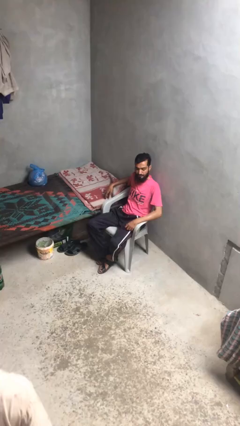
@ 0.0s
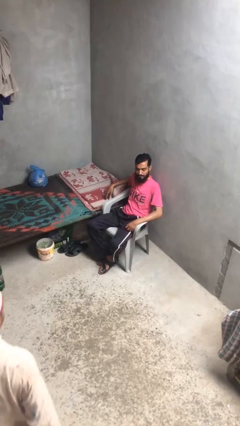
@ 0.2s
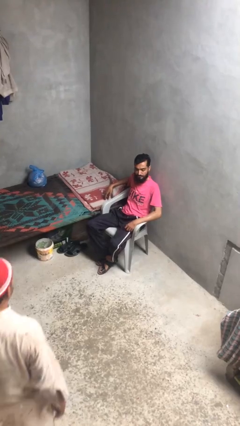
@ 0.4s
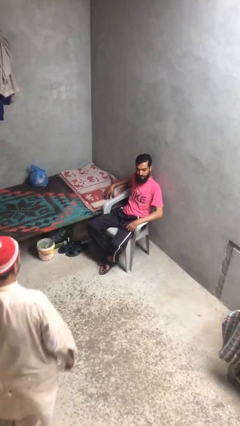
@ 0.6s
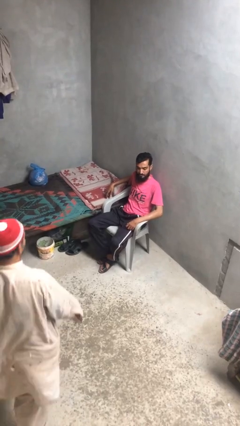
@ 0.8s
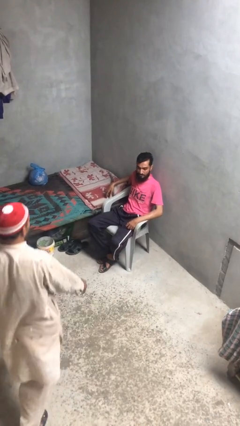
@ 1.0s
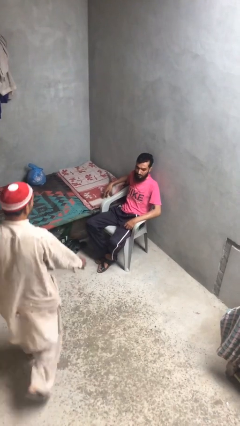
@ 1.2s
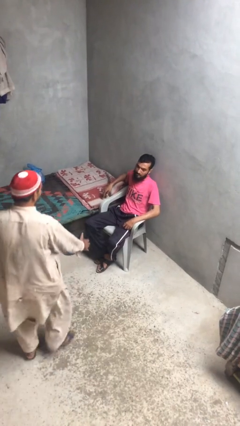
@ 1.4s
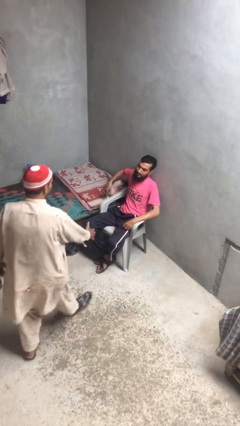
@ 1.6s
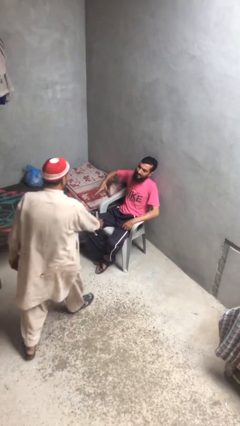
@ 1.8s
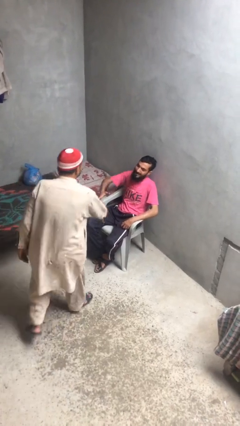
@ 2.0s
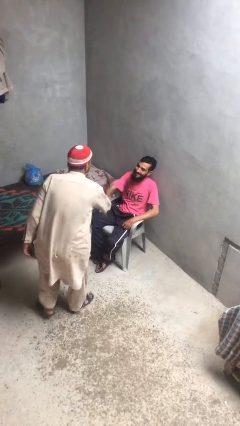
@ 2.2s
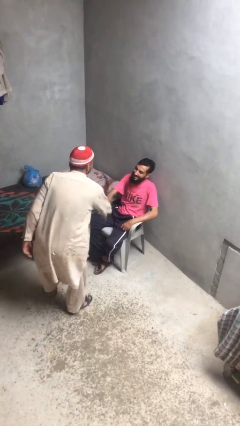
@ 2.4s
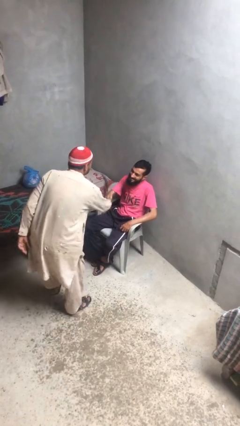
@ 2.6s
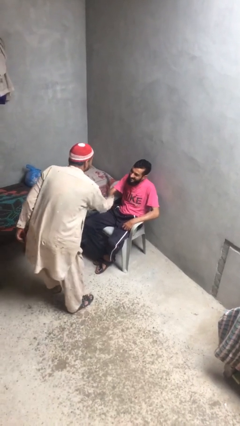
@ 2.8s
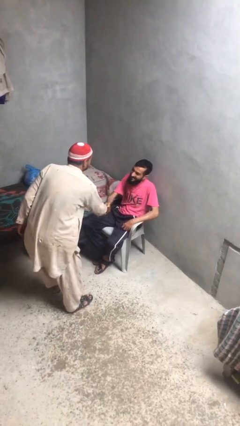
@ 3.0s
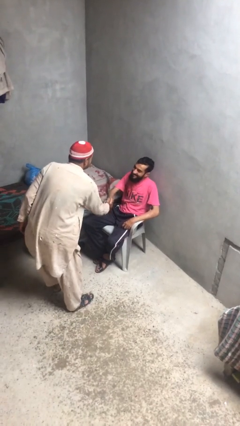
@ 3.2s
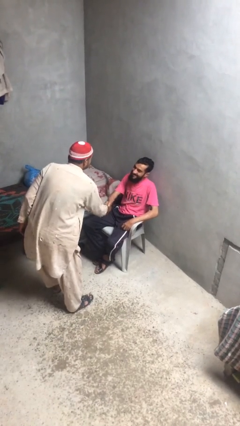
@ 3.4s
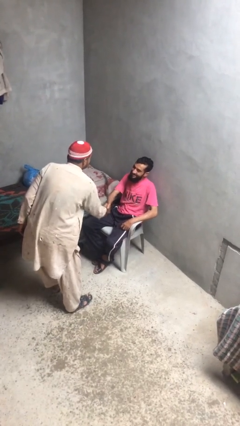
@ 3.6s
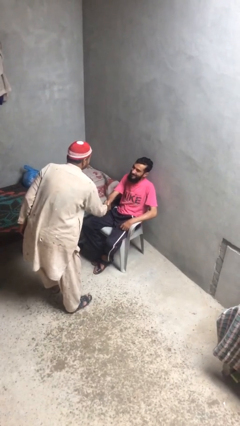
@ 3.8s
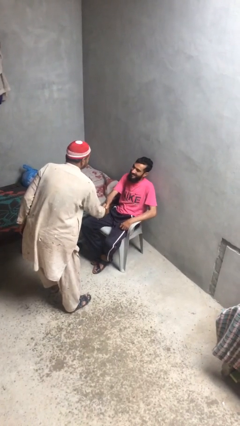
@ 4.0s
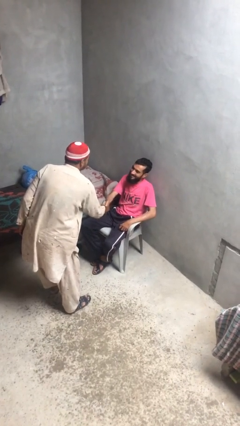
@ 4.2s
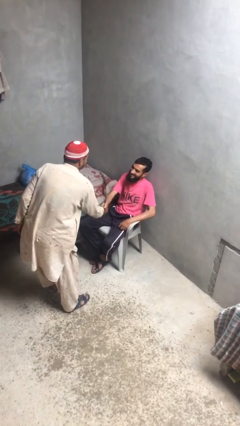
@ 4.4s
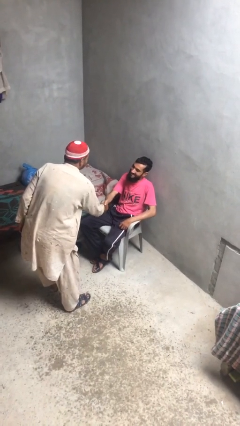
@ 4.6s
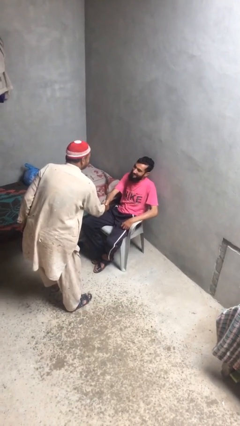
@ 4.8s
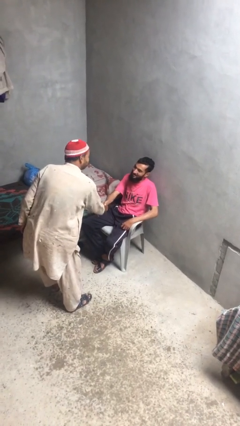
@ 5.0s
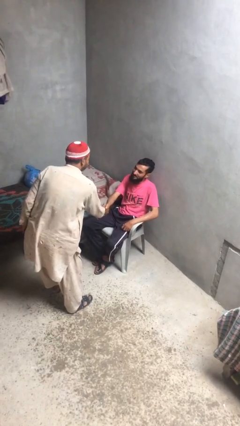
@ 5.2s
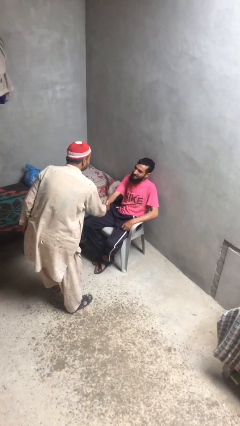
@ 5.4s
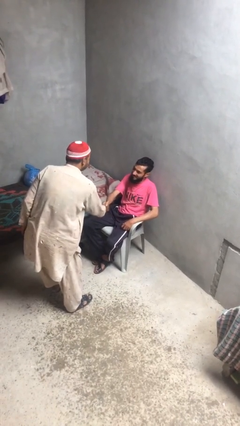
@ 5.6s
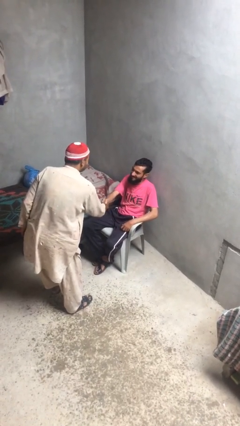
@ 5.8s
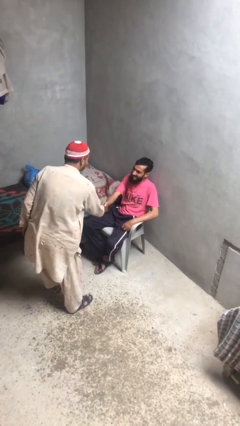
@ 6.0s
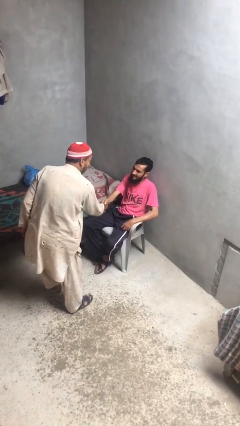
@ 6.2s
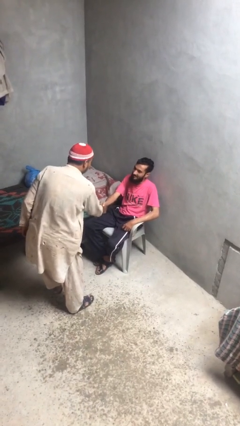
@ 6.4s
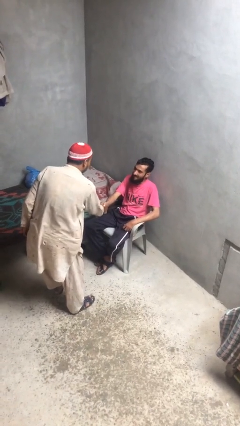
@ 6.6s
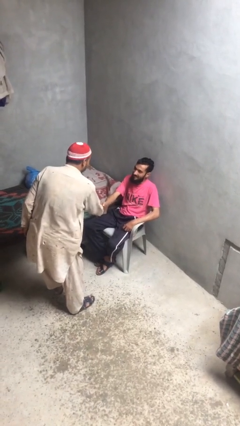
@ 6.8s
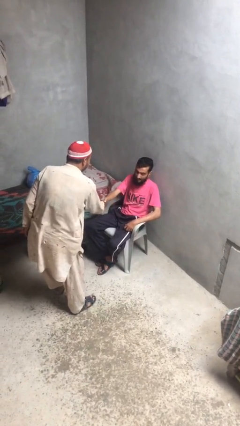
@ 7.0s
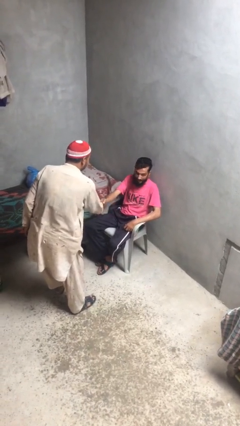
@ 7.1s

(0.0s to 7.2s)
person shakes hand

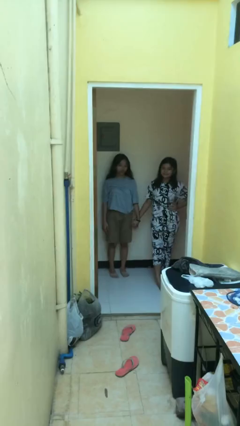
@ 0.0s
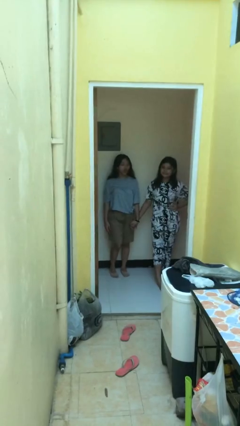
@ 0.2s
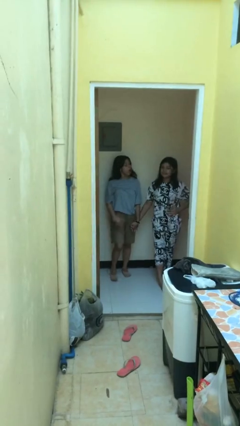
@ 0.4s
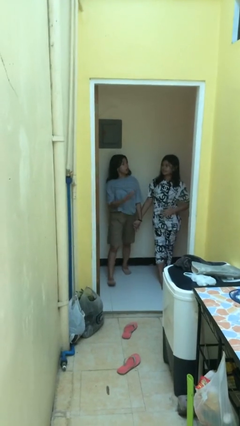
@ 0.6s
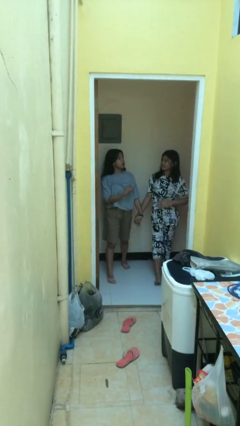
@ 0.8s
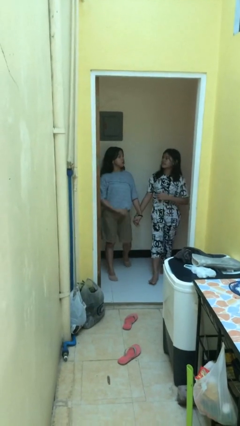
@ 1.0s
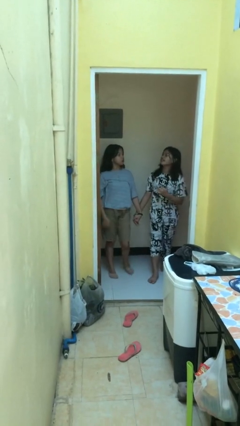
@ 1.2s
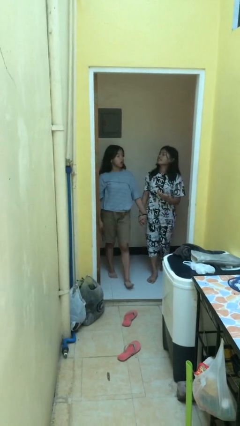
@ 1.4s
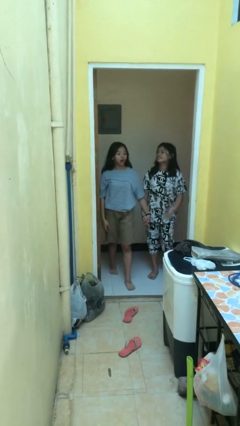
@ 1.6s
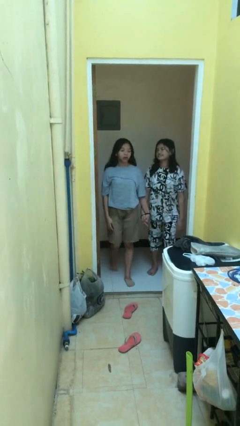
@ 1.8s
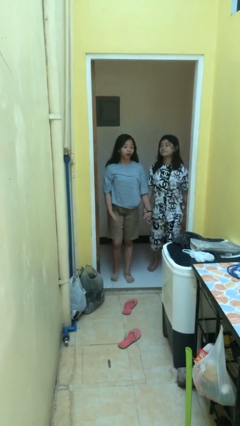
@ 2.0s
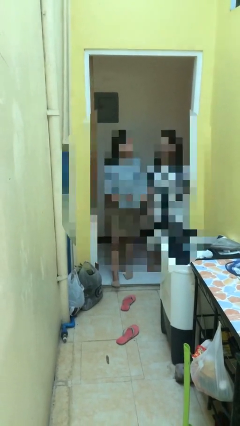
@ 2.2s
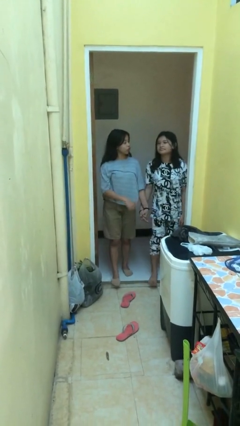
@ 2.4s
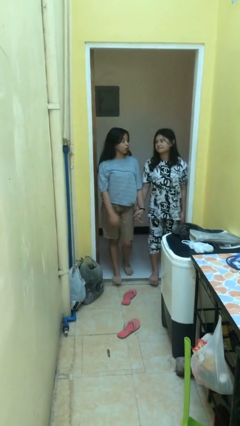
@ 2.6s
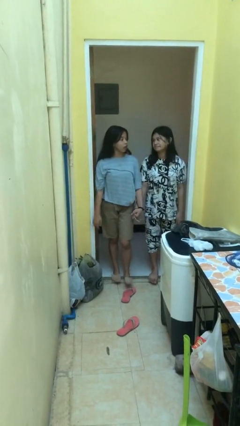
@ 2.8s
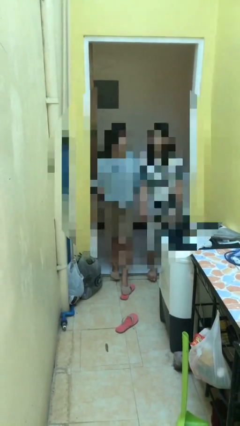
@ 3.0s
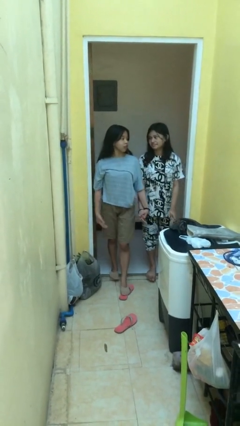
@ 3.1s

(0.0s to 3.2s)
person holds hand

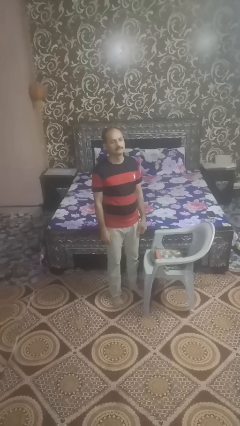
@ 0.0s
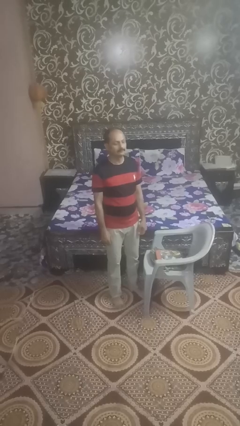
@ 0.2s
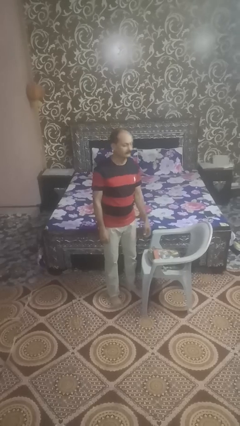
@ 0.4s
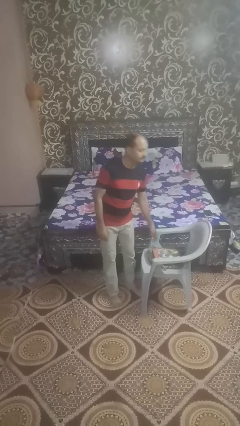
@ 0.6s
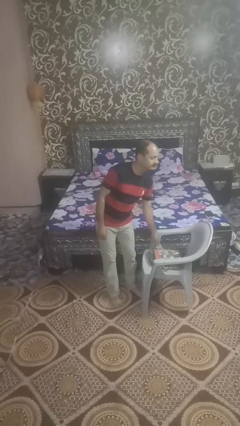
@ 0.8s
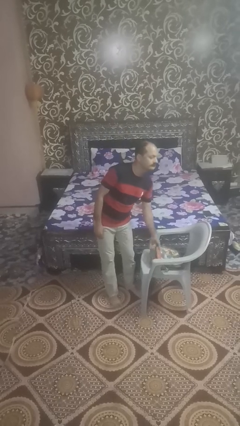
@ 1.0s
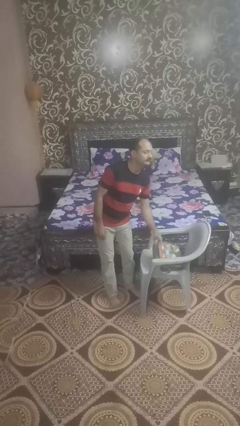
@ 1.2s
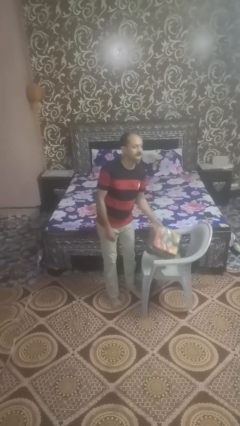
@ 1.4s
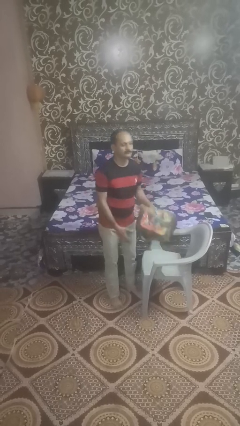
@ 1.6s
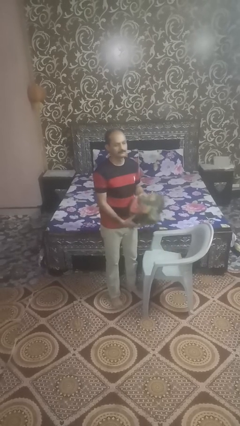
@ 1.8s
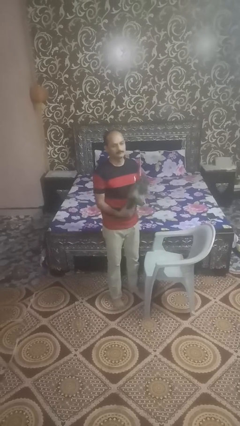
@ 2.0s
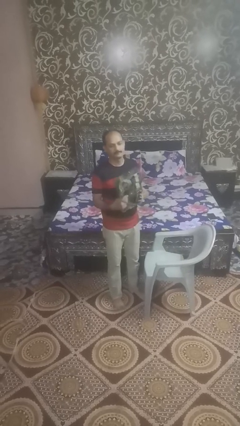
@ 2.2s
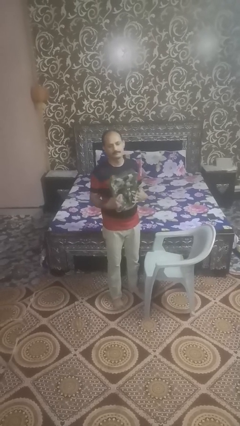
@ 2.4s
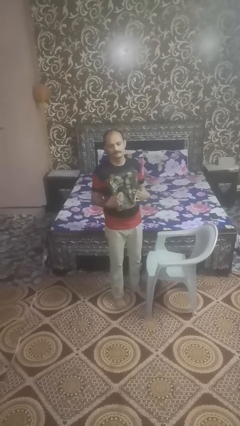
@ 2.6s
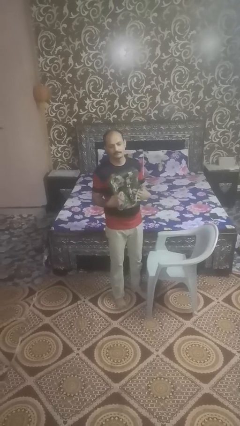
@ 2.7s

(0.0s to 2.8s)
person picks up object from couch

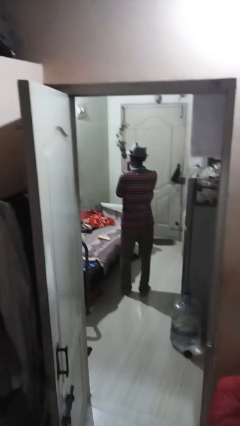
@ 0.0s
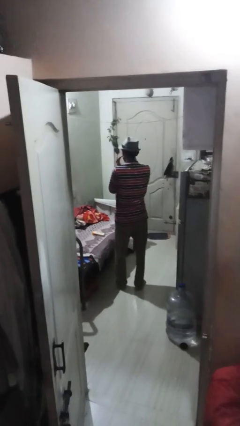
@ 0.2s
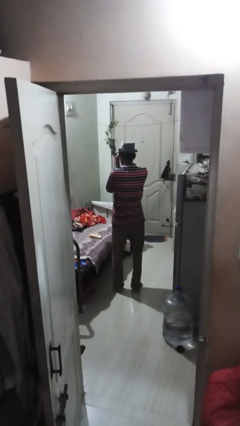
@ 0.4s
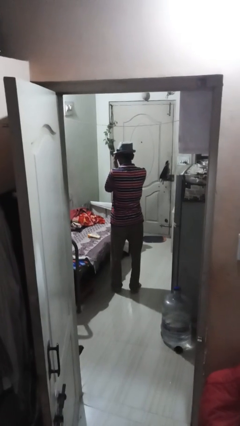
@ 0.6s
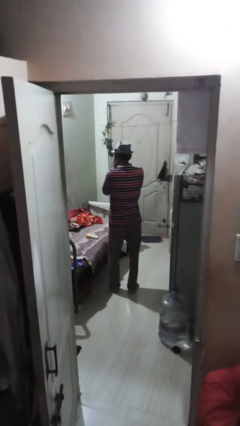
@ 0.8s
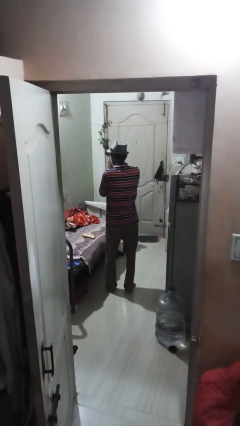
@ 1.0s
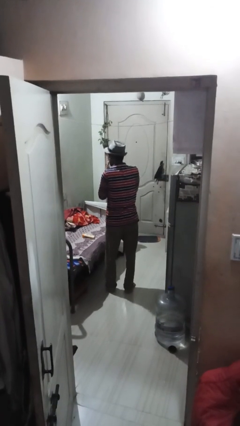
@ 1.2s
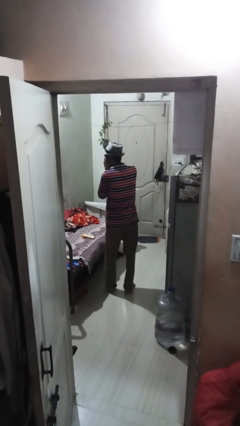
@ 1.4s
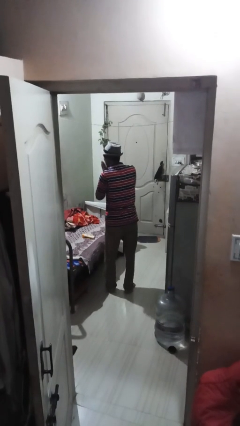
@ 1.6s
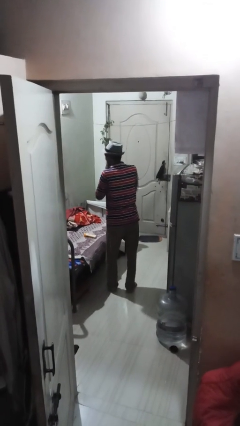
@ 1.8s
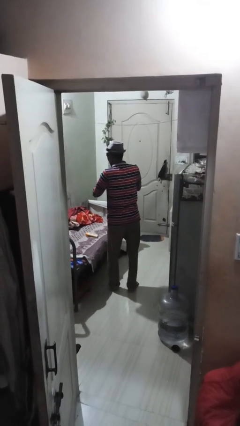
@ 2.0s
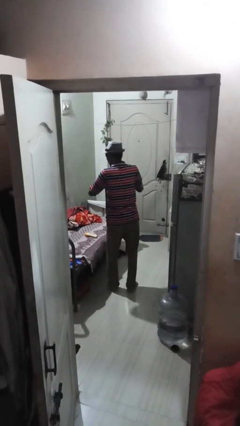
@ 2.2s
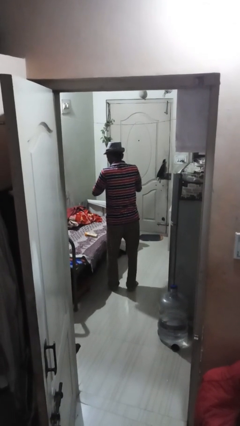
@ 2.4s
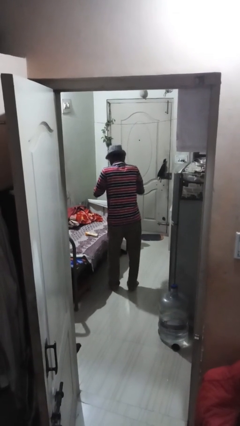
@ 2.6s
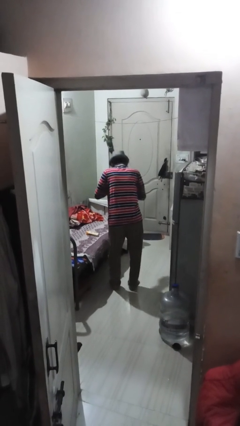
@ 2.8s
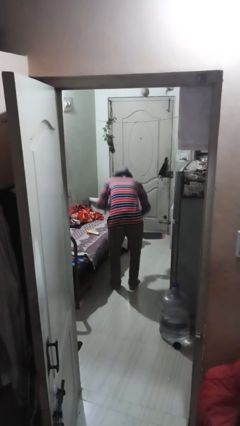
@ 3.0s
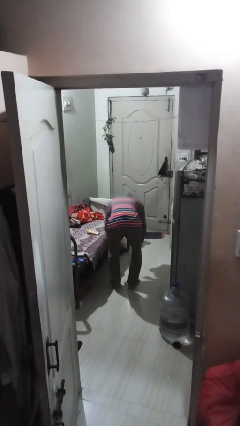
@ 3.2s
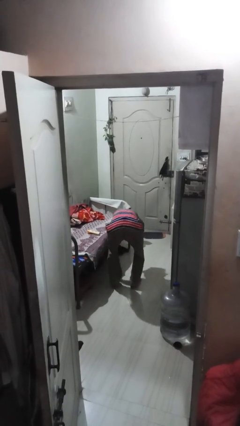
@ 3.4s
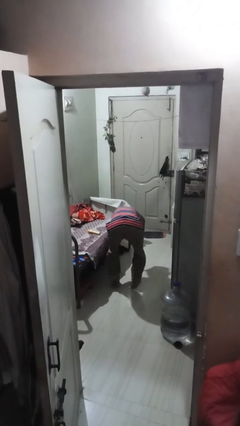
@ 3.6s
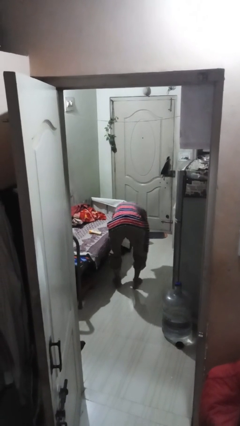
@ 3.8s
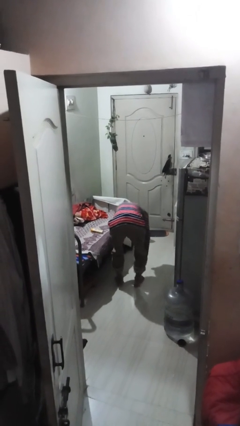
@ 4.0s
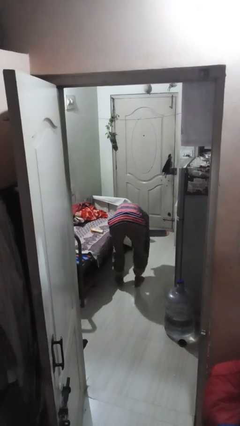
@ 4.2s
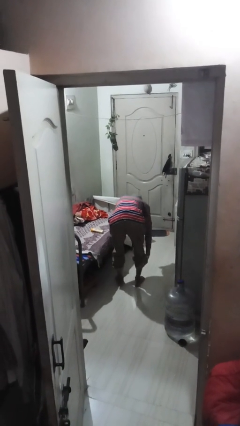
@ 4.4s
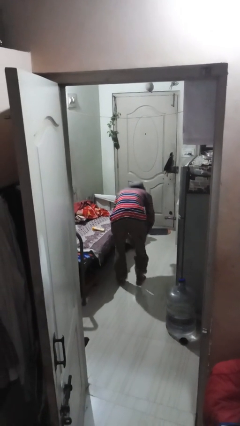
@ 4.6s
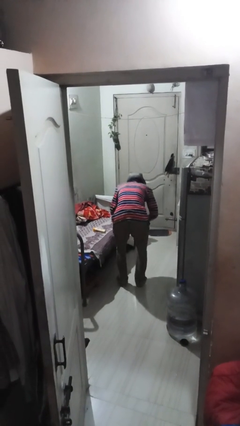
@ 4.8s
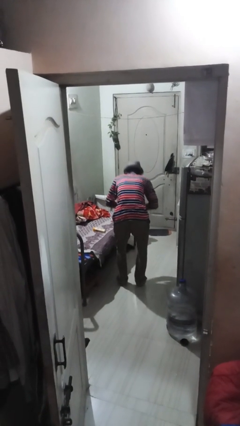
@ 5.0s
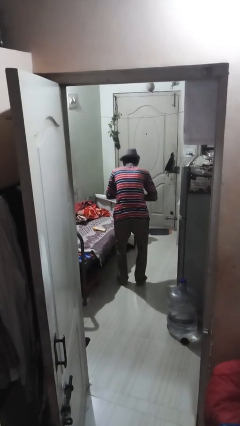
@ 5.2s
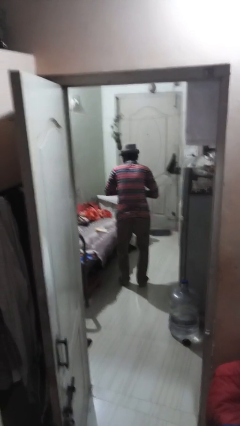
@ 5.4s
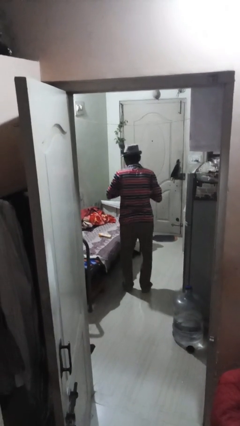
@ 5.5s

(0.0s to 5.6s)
person applies facial moisturizer
